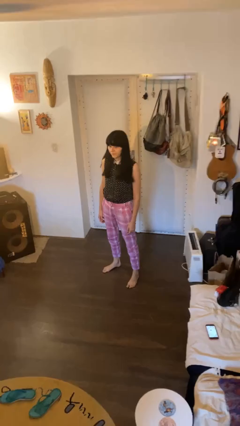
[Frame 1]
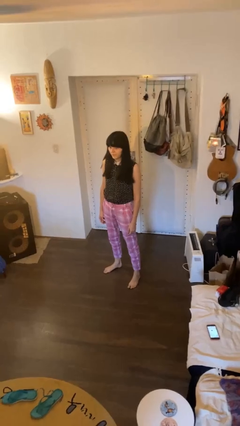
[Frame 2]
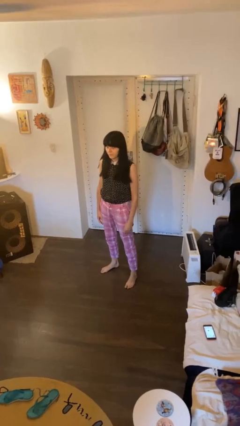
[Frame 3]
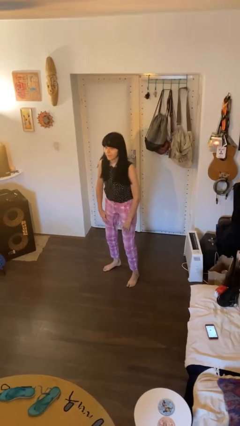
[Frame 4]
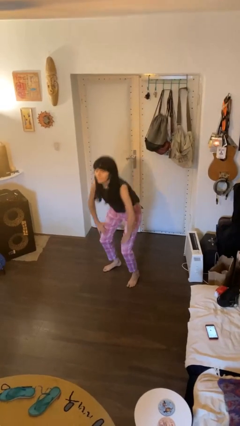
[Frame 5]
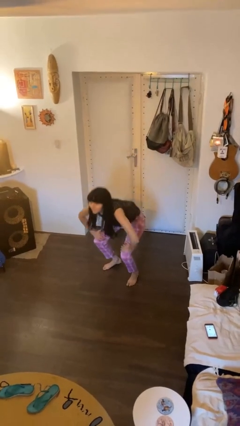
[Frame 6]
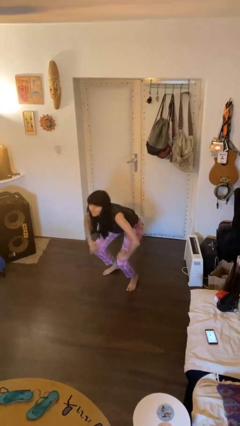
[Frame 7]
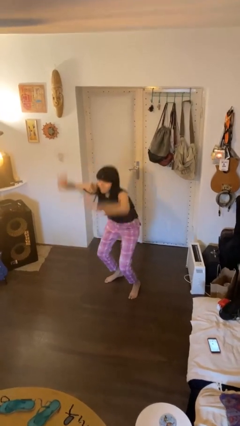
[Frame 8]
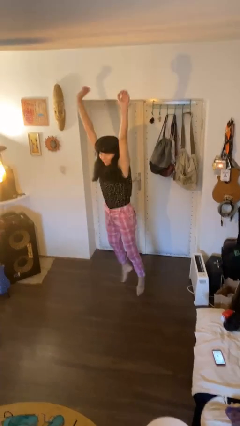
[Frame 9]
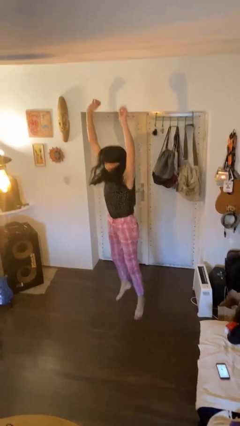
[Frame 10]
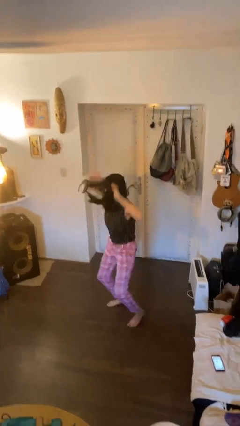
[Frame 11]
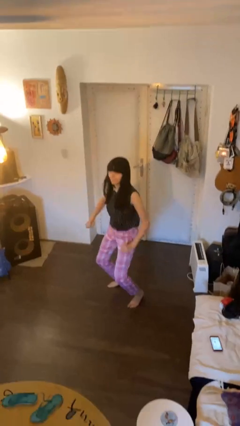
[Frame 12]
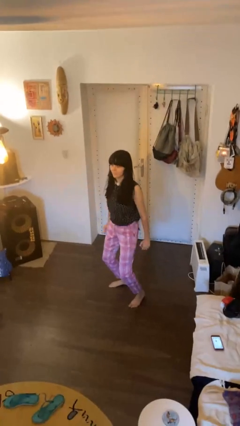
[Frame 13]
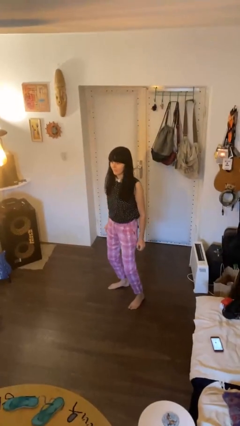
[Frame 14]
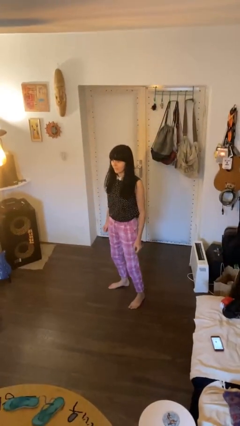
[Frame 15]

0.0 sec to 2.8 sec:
person jumps

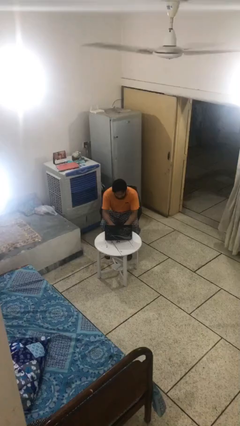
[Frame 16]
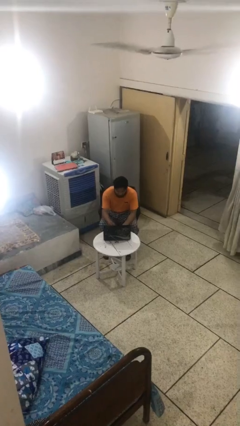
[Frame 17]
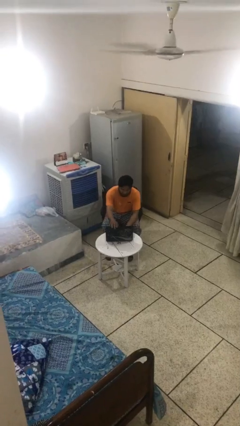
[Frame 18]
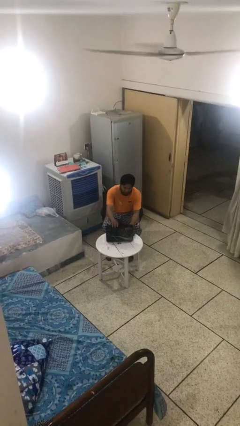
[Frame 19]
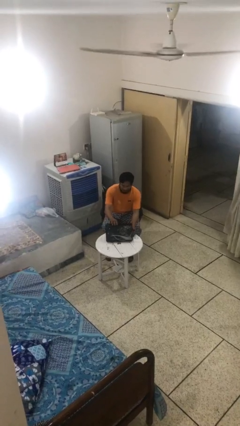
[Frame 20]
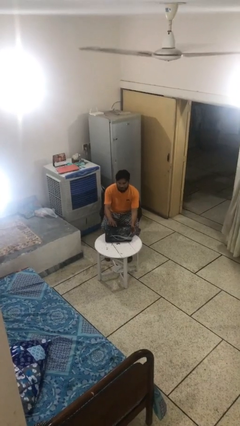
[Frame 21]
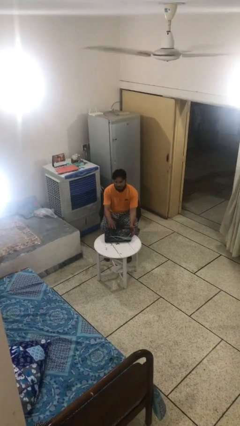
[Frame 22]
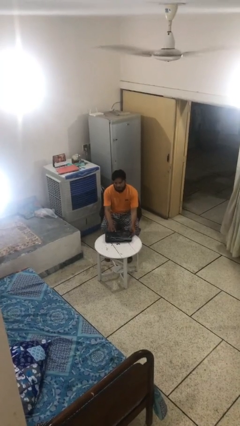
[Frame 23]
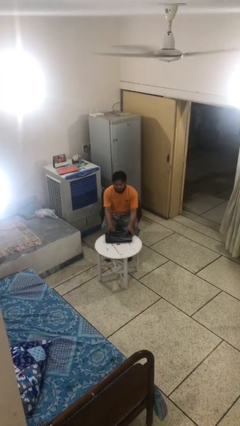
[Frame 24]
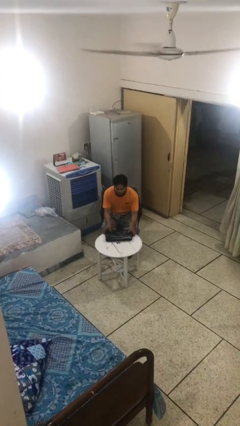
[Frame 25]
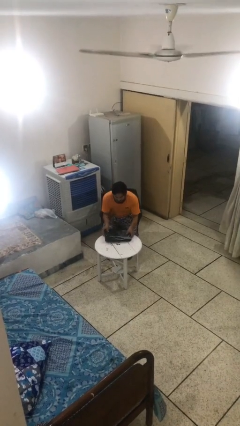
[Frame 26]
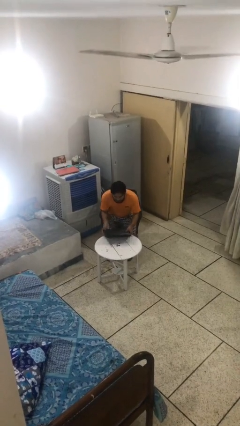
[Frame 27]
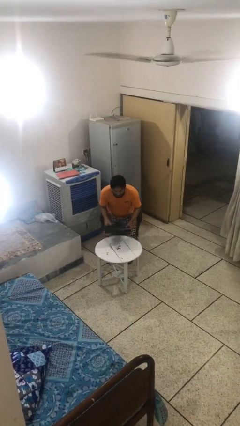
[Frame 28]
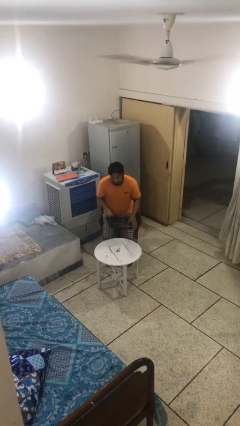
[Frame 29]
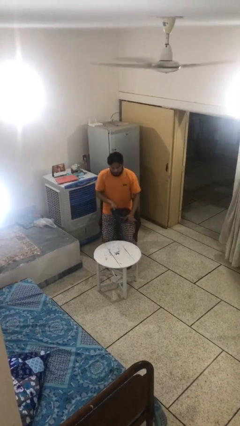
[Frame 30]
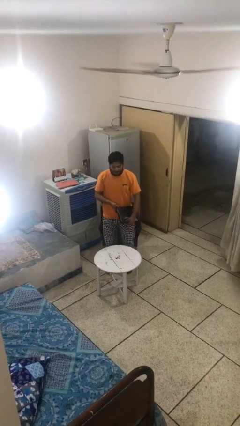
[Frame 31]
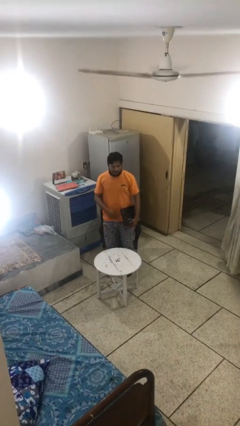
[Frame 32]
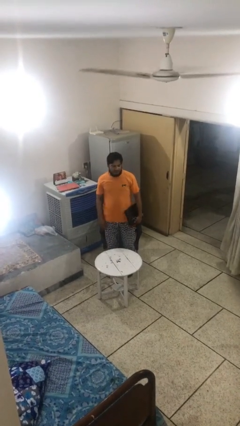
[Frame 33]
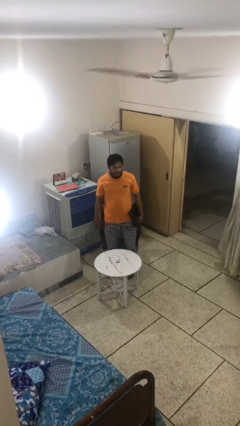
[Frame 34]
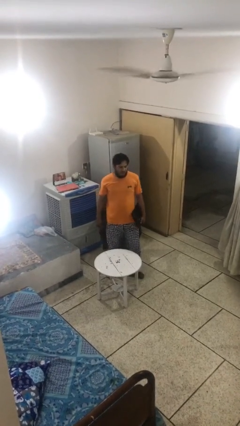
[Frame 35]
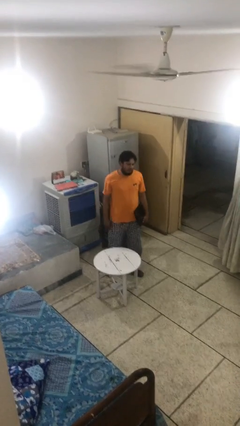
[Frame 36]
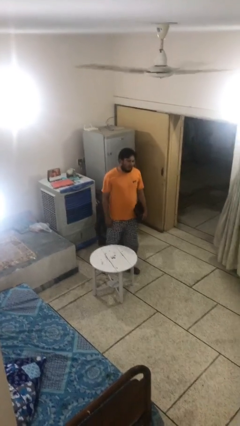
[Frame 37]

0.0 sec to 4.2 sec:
person stands up

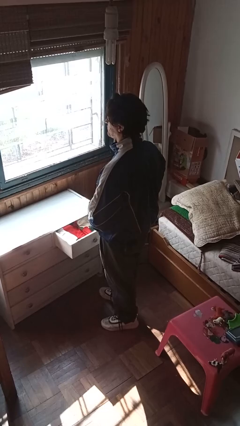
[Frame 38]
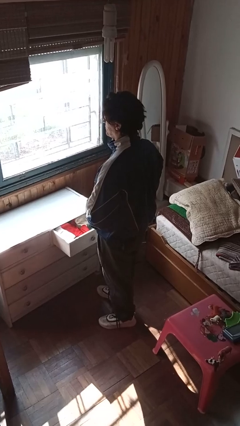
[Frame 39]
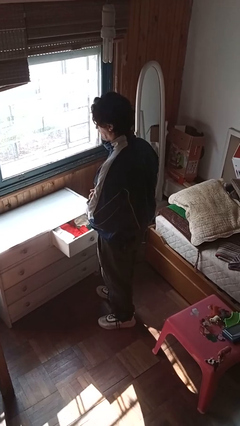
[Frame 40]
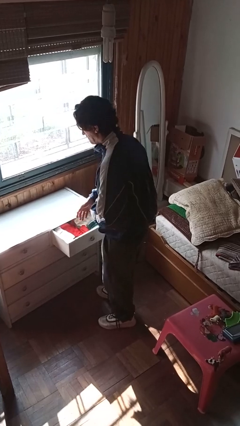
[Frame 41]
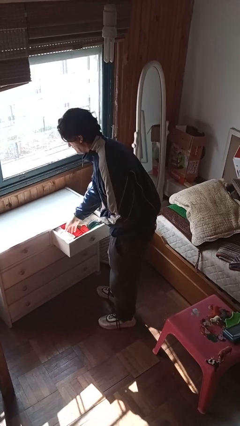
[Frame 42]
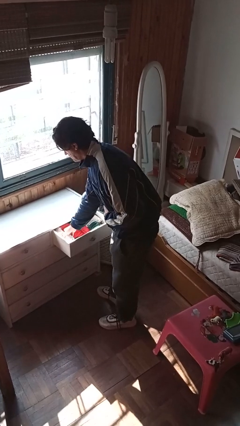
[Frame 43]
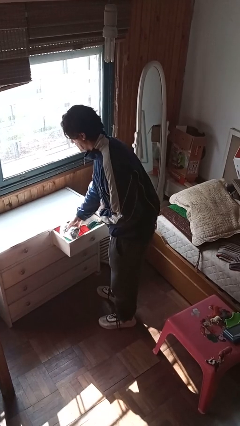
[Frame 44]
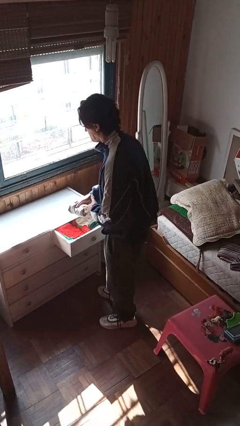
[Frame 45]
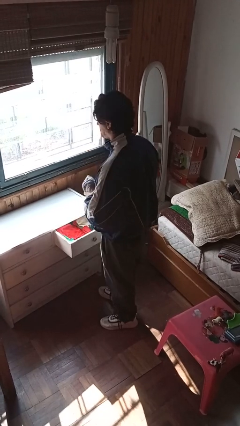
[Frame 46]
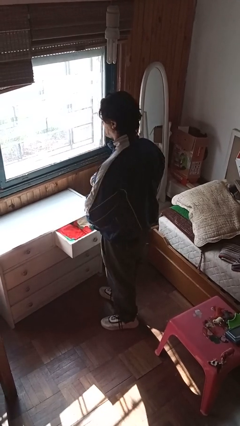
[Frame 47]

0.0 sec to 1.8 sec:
person takes clothes from dresser

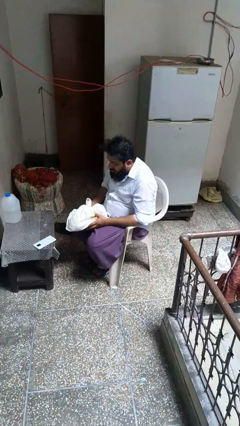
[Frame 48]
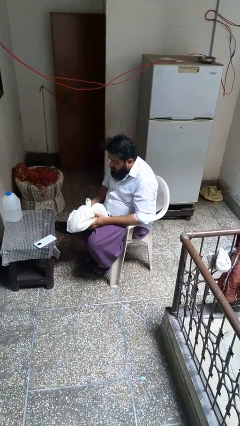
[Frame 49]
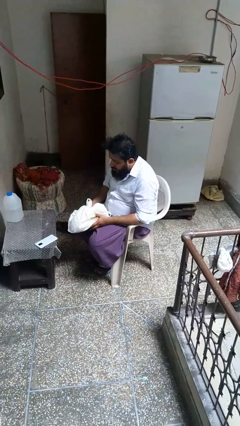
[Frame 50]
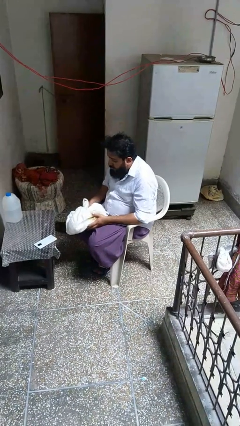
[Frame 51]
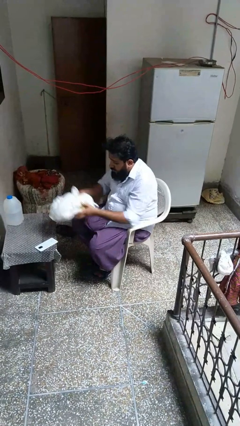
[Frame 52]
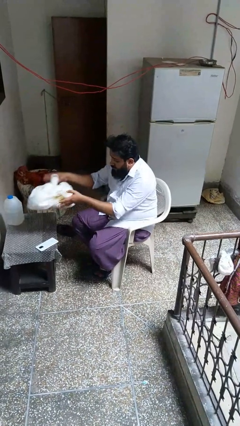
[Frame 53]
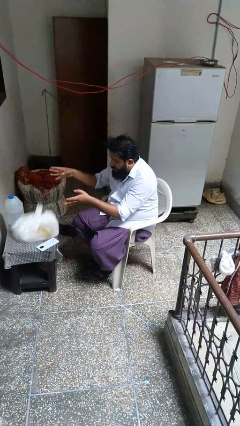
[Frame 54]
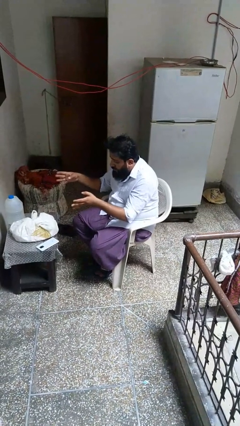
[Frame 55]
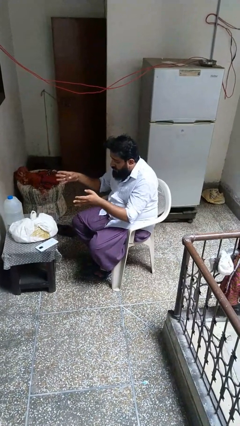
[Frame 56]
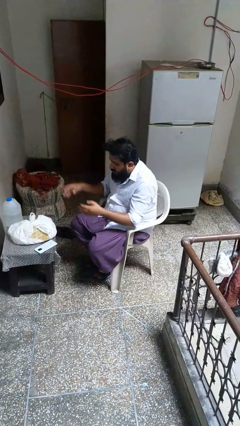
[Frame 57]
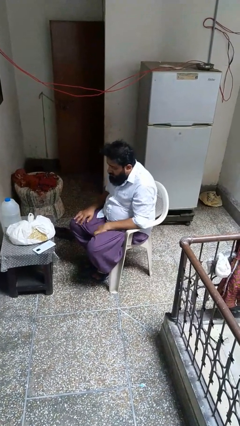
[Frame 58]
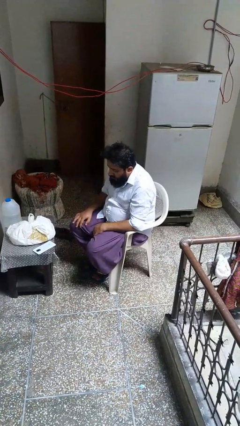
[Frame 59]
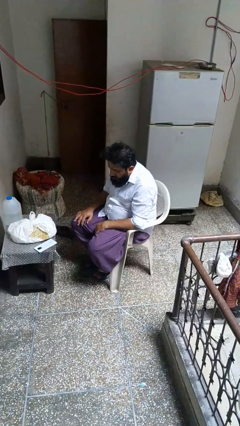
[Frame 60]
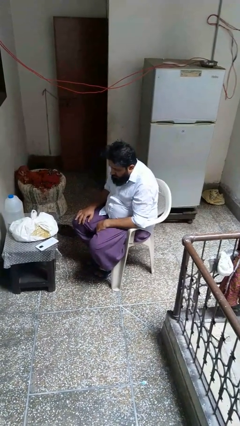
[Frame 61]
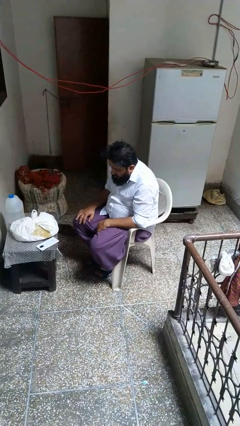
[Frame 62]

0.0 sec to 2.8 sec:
person throws object on table

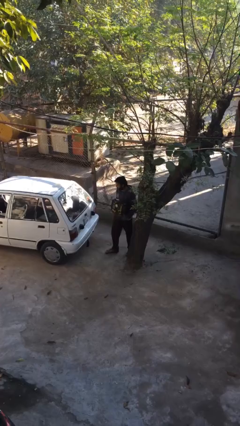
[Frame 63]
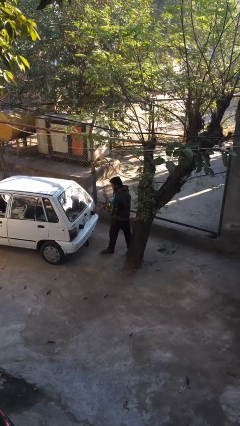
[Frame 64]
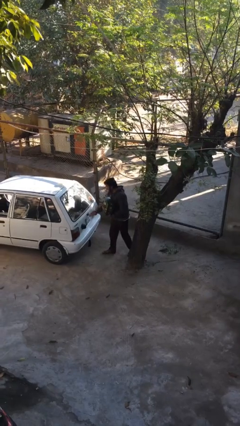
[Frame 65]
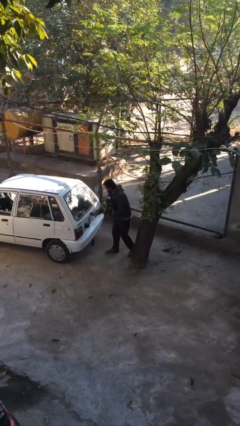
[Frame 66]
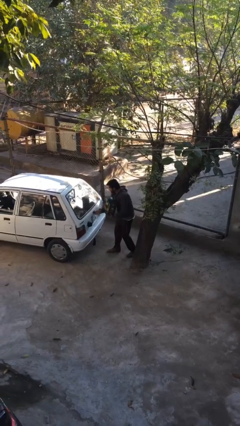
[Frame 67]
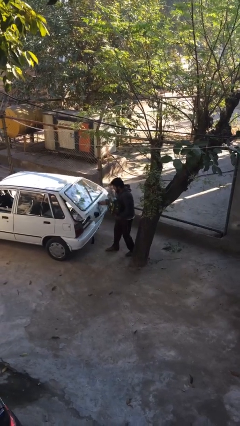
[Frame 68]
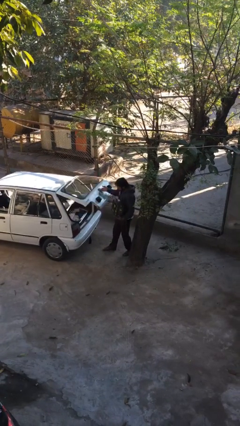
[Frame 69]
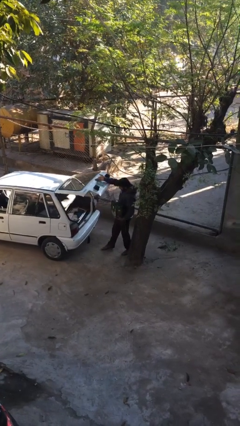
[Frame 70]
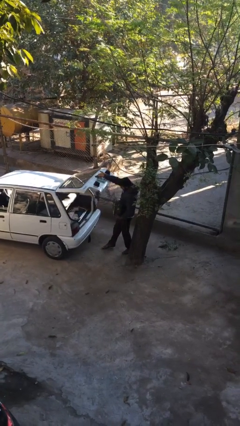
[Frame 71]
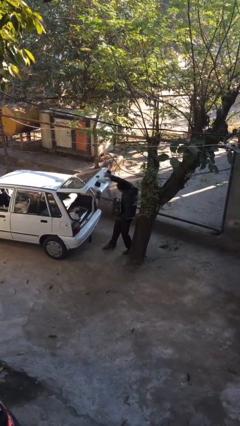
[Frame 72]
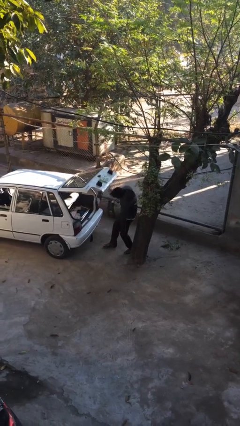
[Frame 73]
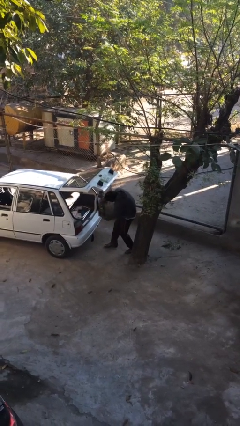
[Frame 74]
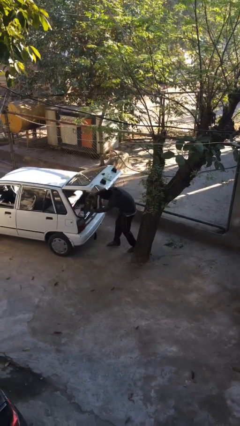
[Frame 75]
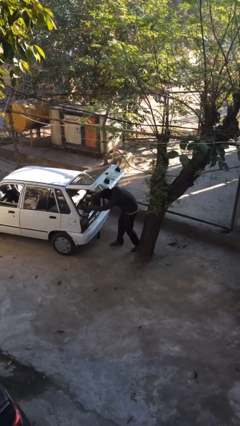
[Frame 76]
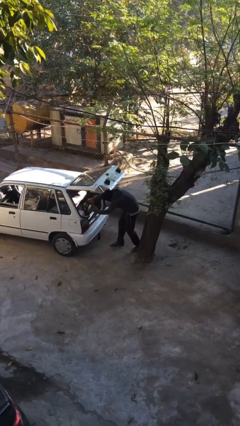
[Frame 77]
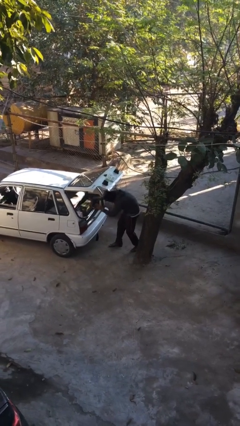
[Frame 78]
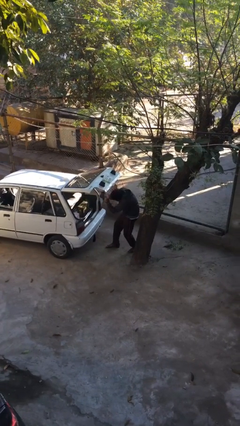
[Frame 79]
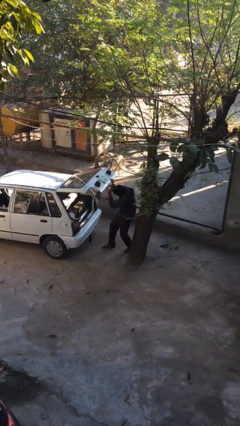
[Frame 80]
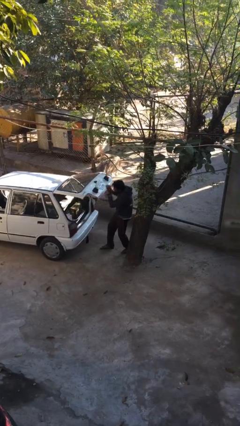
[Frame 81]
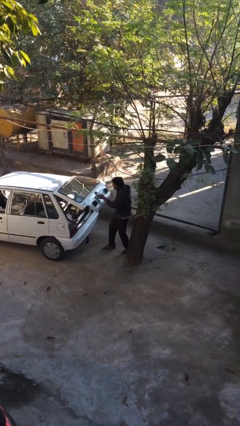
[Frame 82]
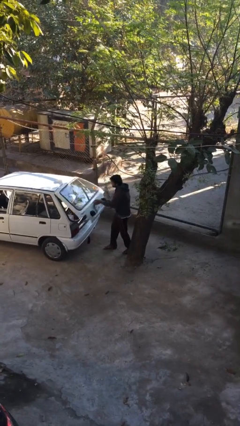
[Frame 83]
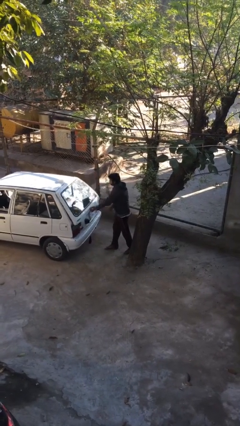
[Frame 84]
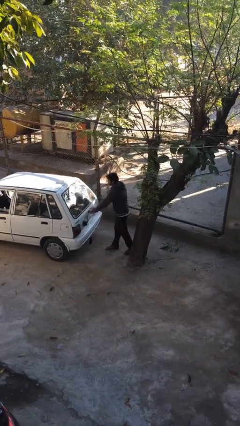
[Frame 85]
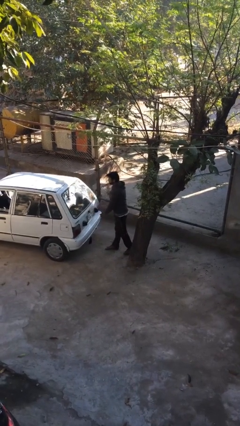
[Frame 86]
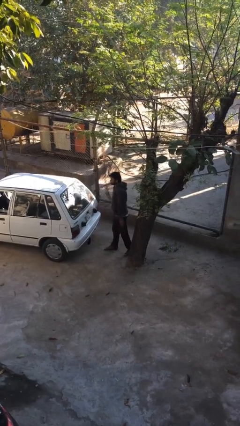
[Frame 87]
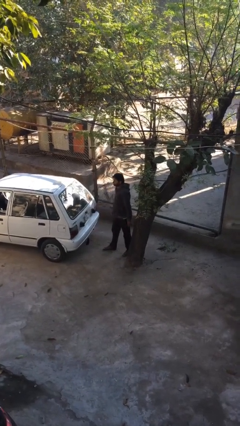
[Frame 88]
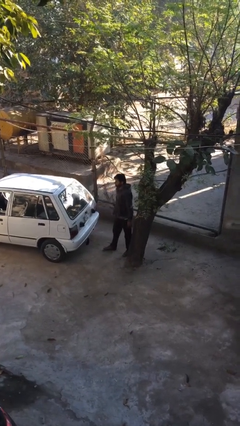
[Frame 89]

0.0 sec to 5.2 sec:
person loads car

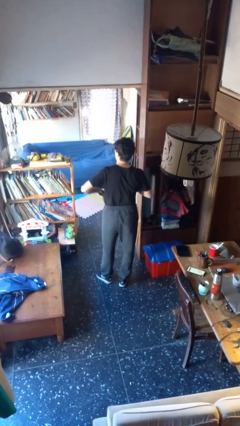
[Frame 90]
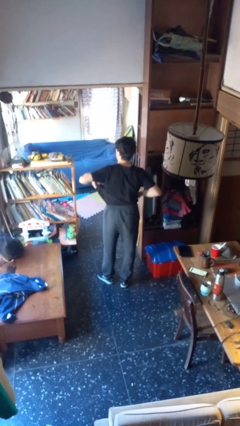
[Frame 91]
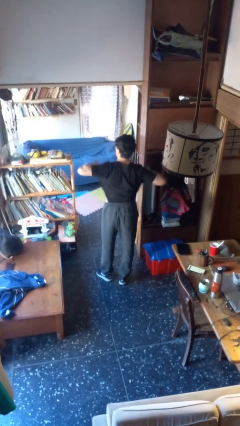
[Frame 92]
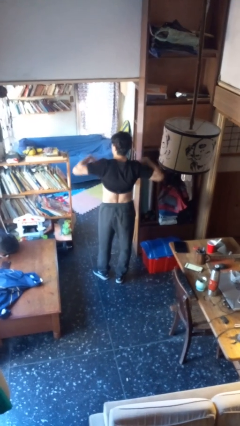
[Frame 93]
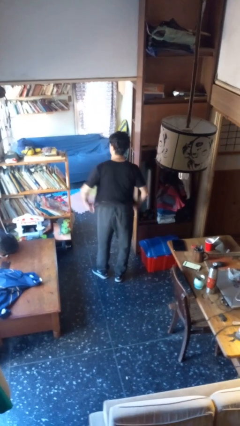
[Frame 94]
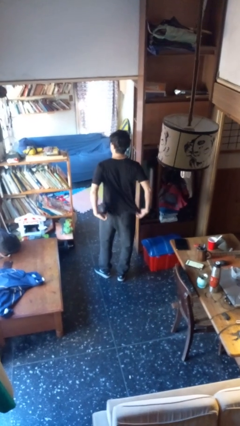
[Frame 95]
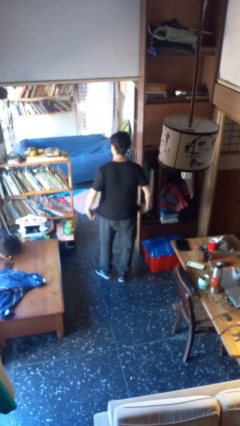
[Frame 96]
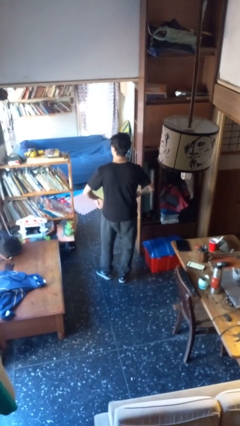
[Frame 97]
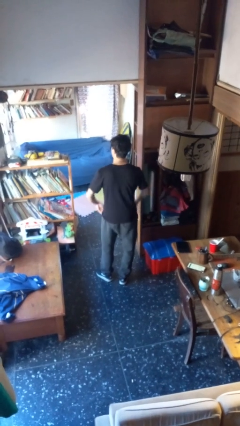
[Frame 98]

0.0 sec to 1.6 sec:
person untucks shirt
